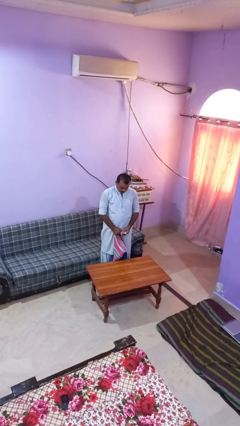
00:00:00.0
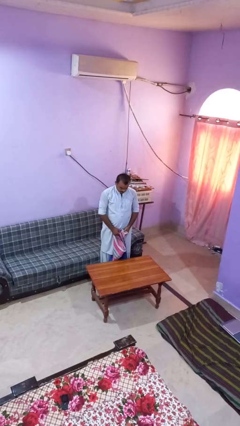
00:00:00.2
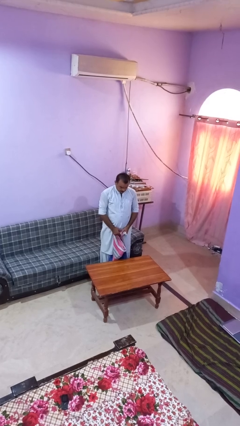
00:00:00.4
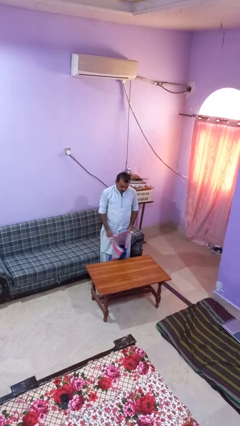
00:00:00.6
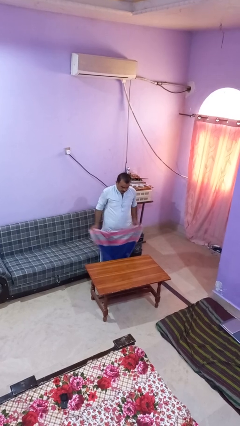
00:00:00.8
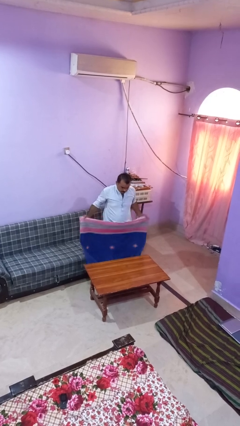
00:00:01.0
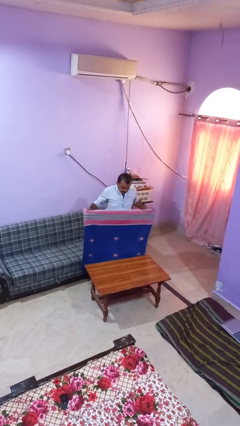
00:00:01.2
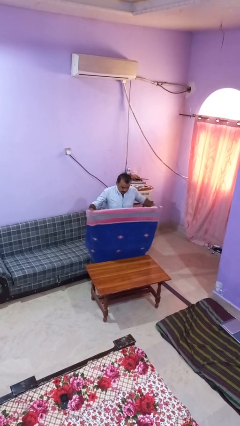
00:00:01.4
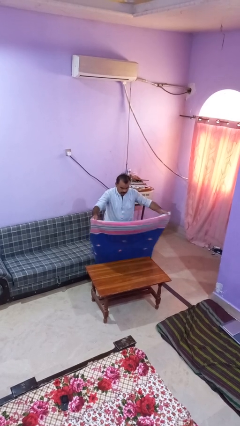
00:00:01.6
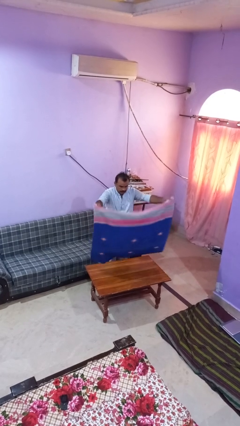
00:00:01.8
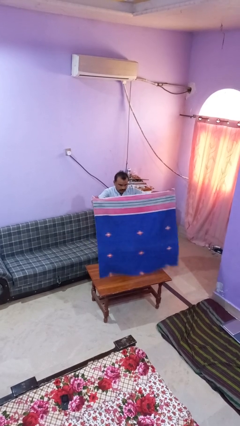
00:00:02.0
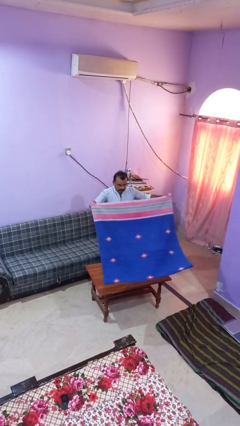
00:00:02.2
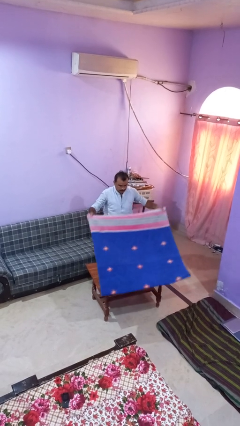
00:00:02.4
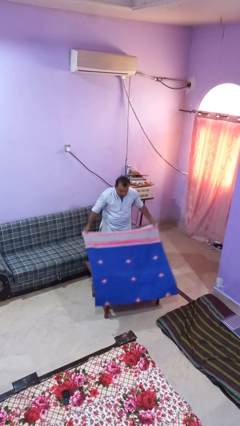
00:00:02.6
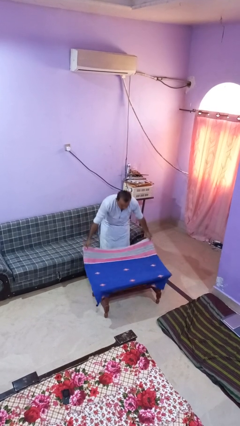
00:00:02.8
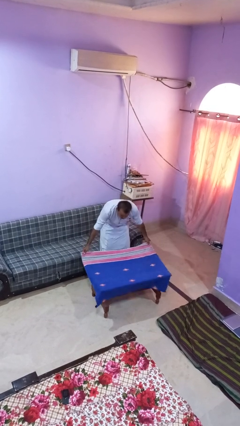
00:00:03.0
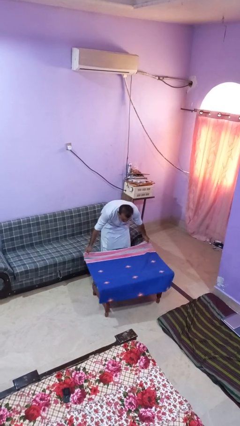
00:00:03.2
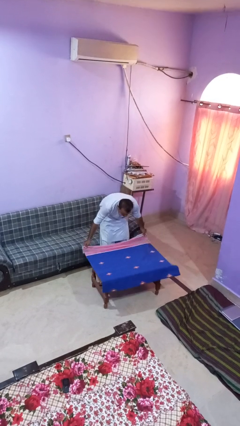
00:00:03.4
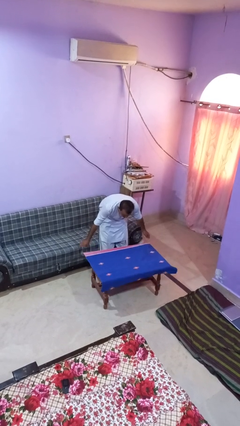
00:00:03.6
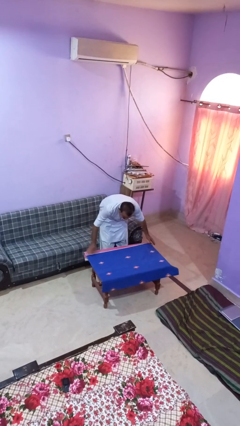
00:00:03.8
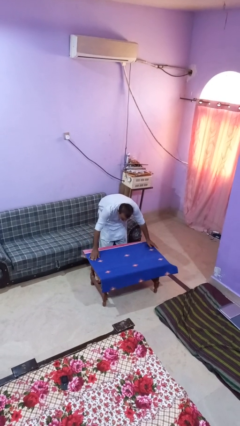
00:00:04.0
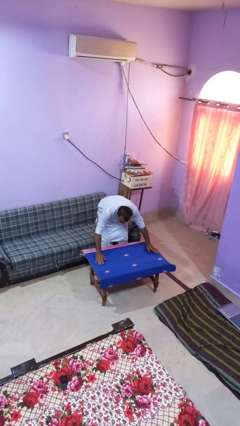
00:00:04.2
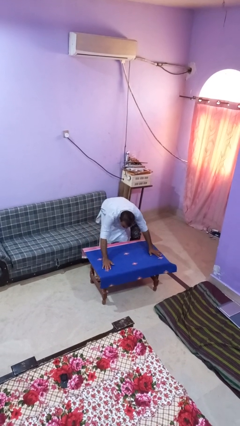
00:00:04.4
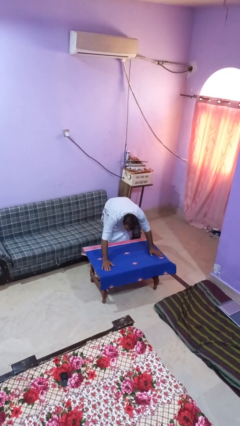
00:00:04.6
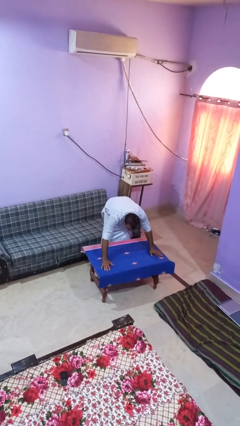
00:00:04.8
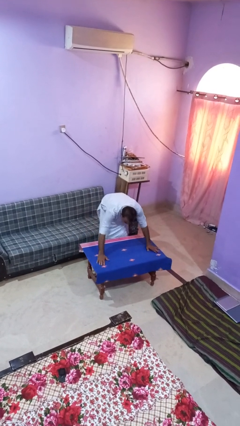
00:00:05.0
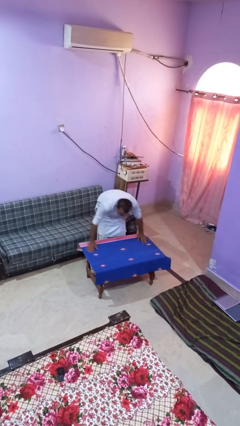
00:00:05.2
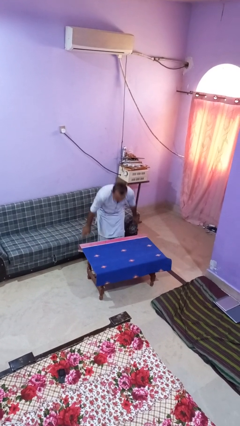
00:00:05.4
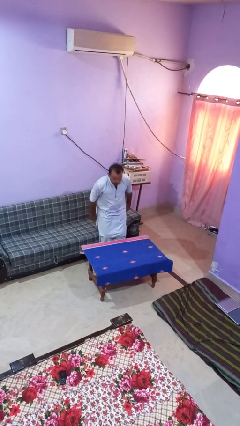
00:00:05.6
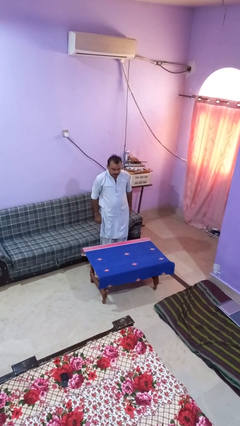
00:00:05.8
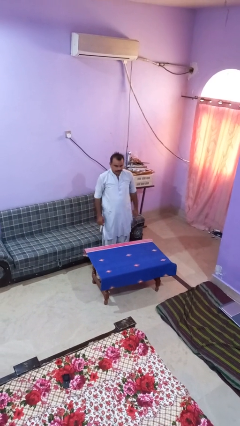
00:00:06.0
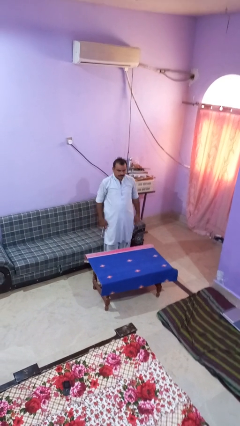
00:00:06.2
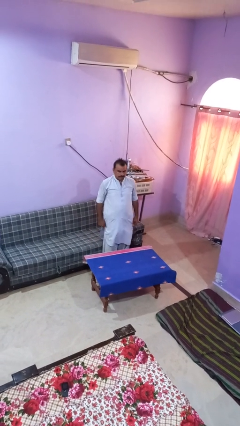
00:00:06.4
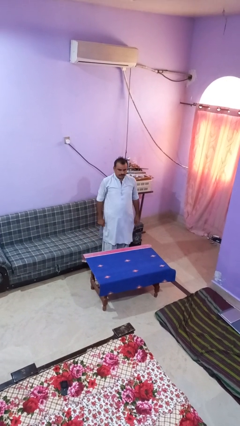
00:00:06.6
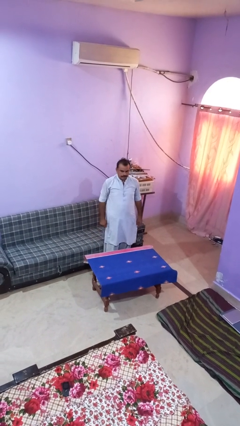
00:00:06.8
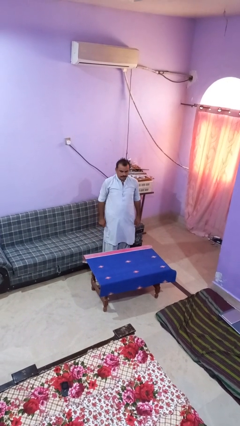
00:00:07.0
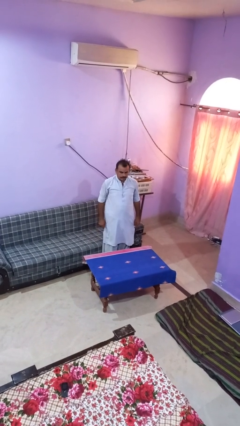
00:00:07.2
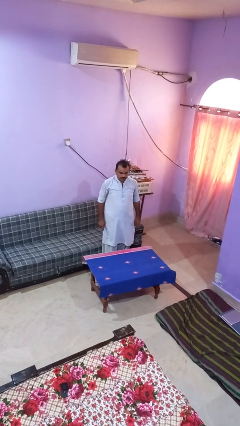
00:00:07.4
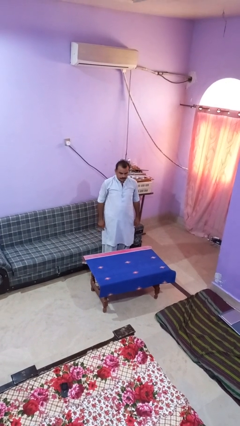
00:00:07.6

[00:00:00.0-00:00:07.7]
person spreads tablecloth

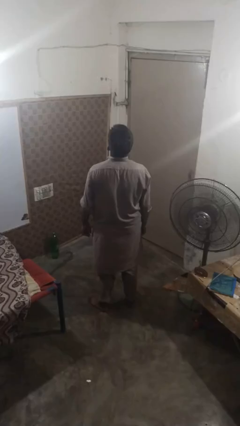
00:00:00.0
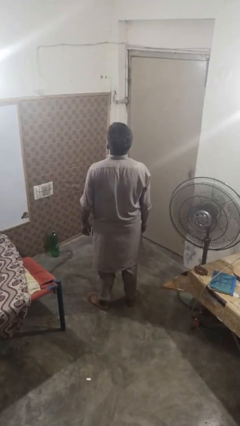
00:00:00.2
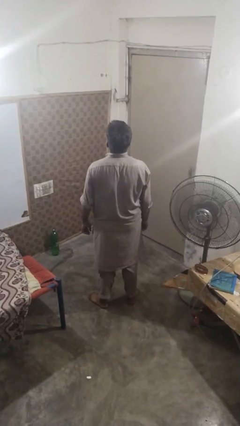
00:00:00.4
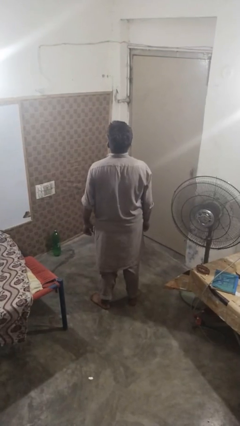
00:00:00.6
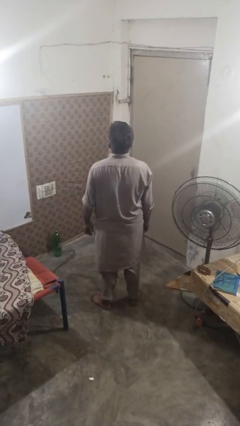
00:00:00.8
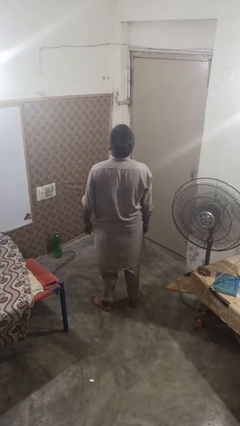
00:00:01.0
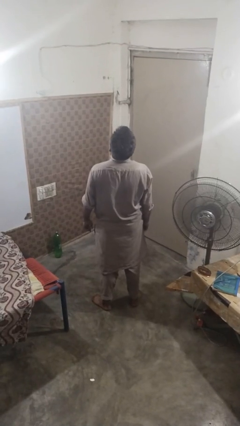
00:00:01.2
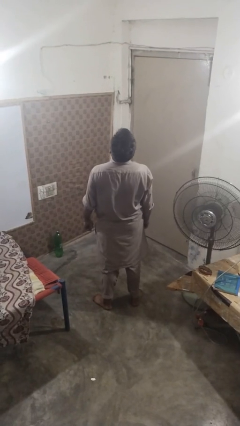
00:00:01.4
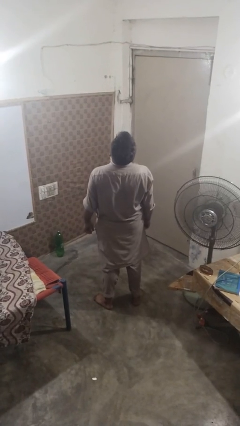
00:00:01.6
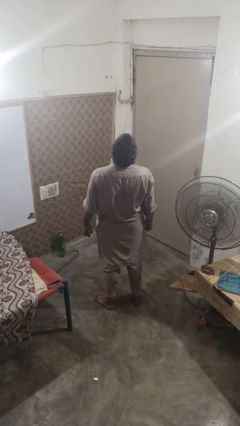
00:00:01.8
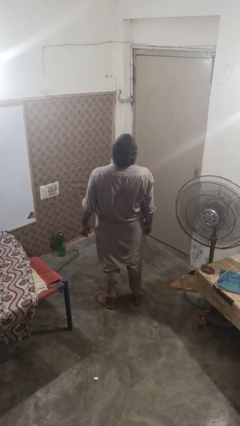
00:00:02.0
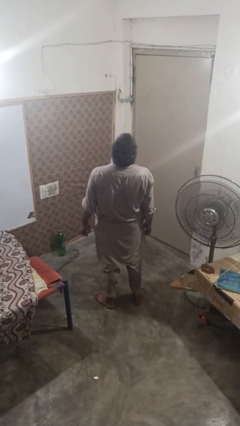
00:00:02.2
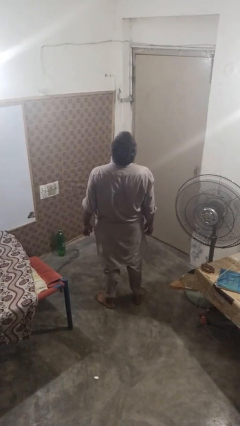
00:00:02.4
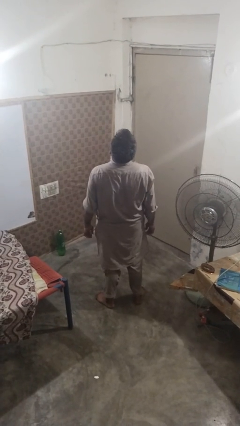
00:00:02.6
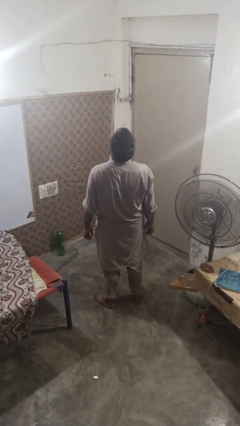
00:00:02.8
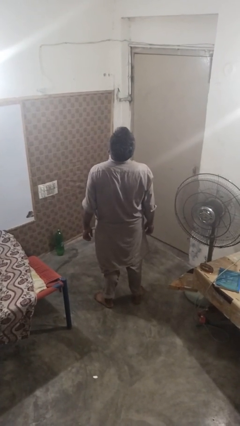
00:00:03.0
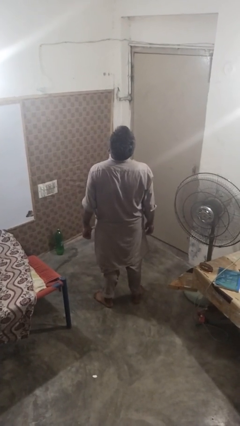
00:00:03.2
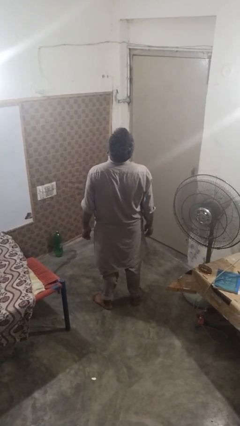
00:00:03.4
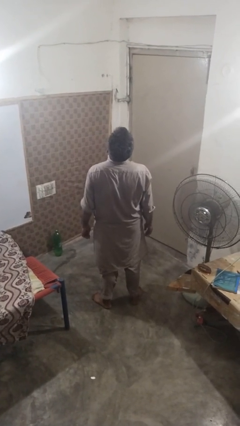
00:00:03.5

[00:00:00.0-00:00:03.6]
person stretches back

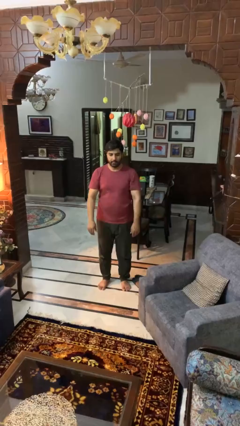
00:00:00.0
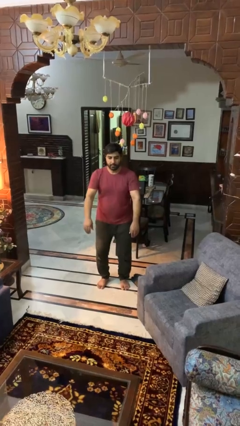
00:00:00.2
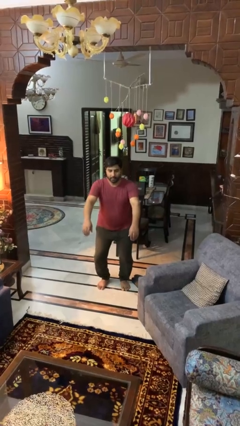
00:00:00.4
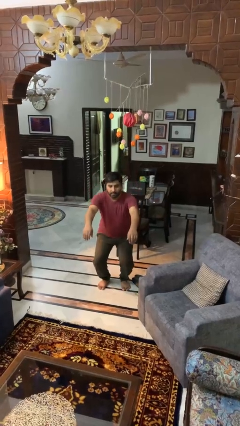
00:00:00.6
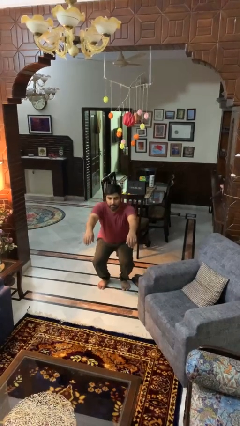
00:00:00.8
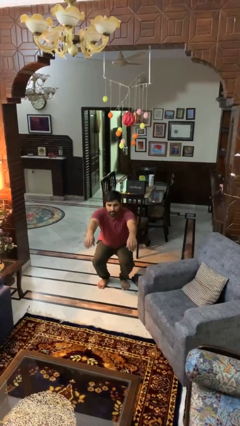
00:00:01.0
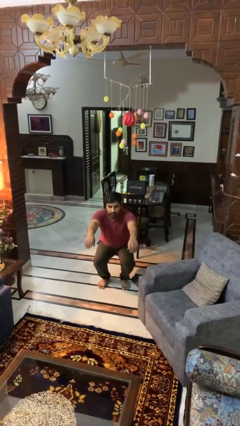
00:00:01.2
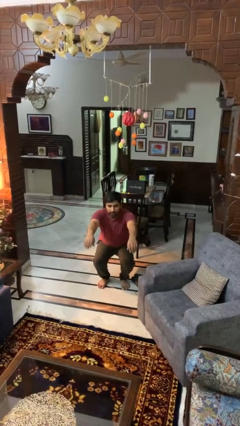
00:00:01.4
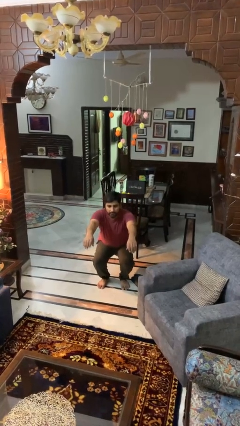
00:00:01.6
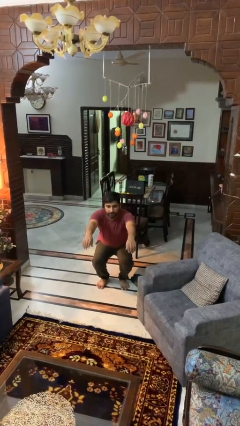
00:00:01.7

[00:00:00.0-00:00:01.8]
person squats

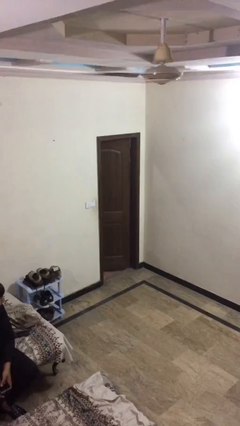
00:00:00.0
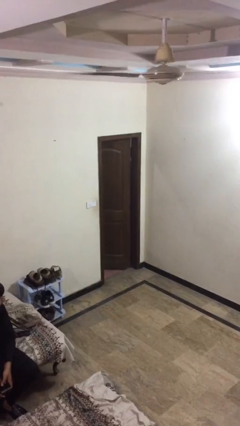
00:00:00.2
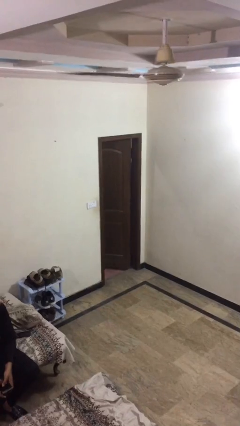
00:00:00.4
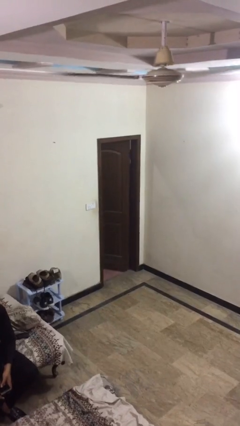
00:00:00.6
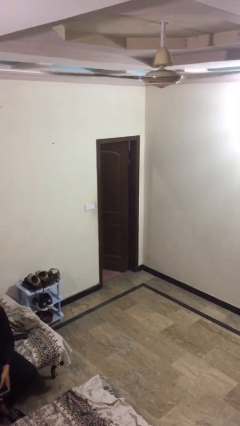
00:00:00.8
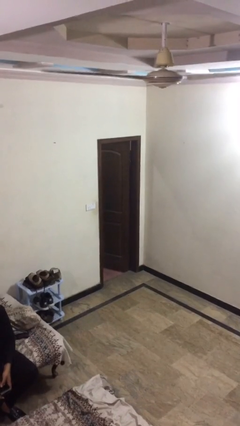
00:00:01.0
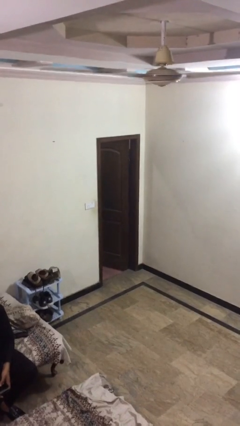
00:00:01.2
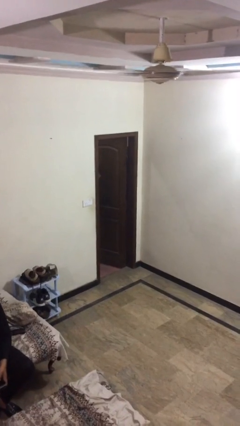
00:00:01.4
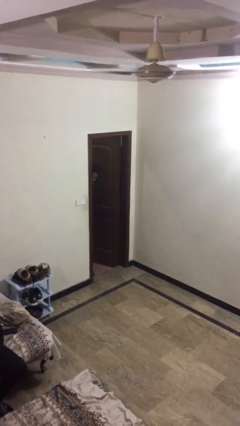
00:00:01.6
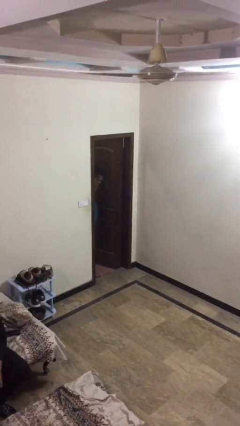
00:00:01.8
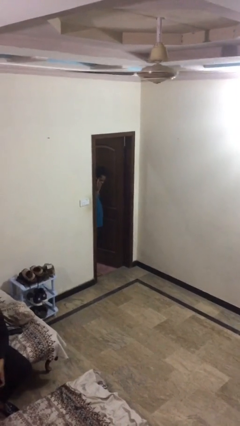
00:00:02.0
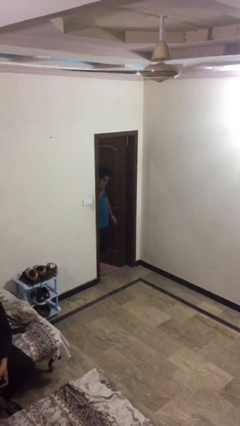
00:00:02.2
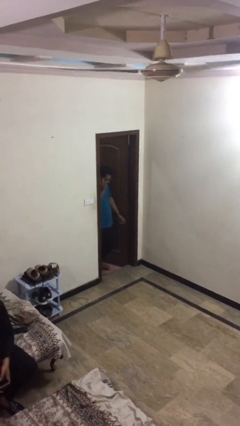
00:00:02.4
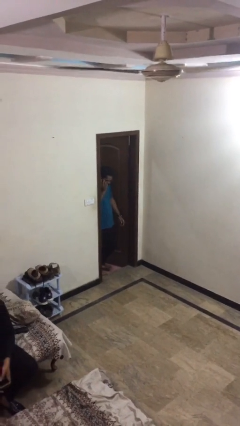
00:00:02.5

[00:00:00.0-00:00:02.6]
person opens facility door

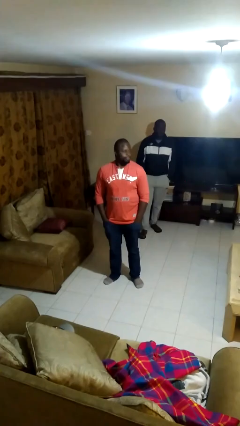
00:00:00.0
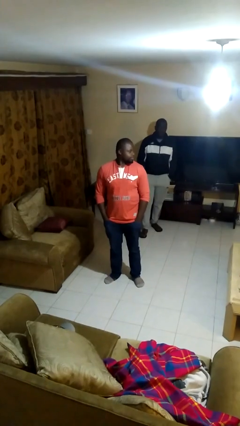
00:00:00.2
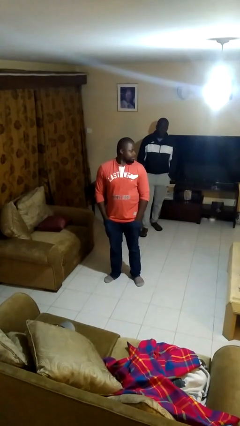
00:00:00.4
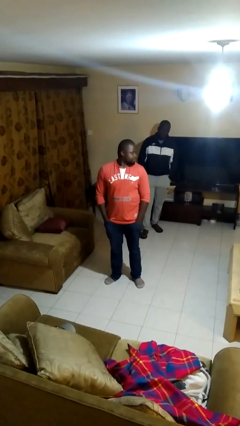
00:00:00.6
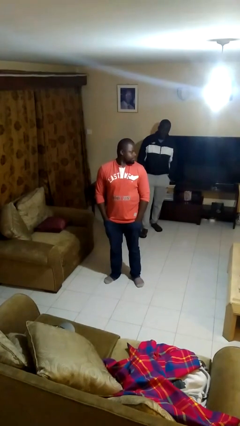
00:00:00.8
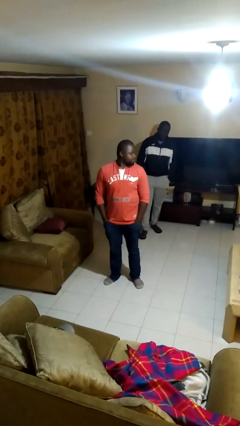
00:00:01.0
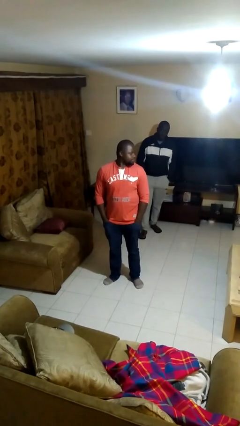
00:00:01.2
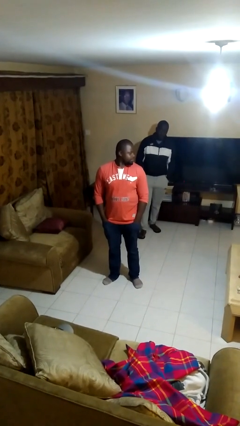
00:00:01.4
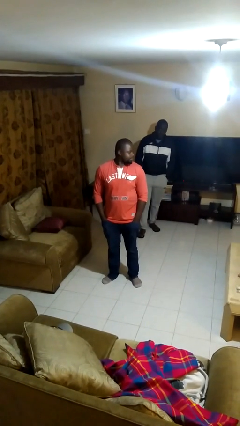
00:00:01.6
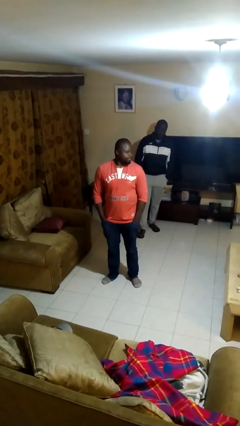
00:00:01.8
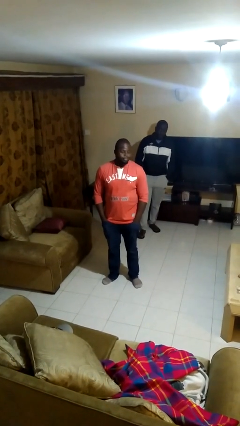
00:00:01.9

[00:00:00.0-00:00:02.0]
person looks over shoulder

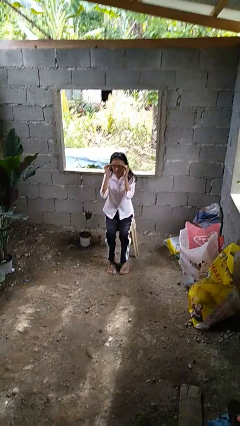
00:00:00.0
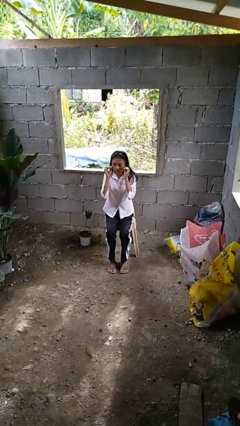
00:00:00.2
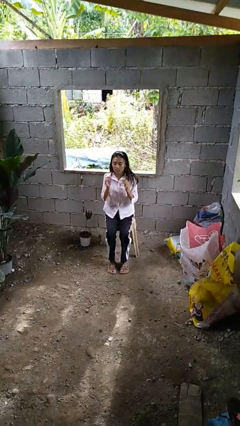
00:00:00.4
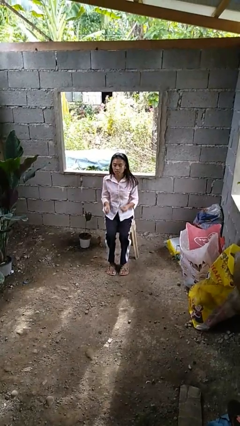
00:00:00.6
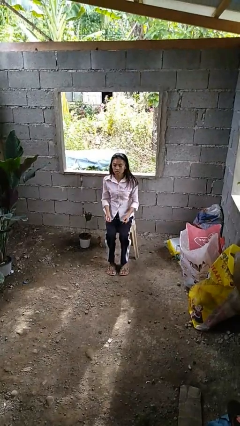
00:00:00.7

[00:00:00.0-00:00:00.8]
person takes off glasses
